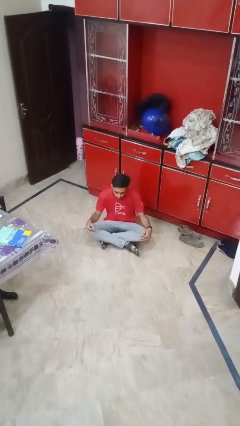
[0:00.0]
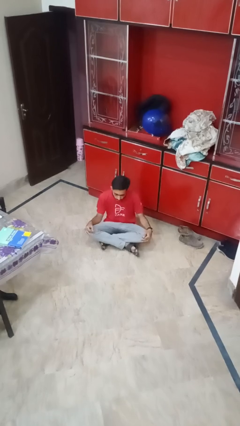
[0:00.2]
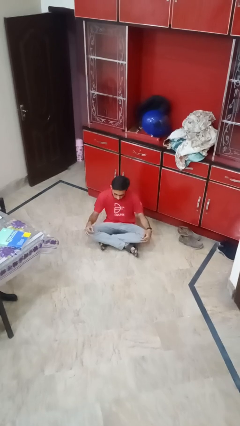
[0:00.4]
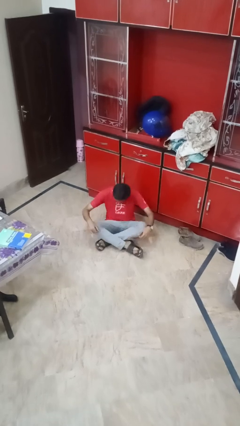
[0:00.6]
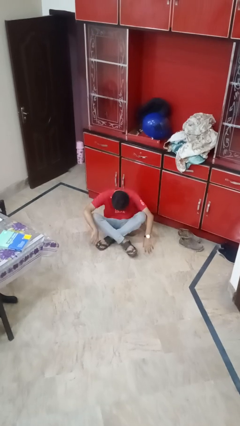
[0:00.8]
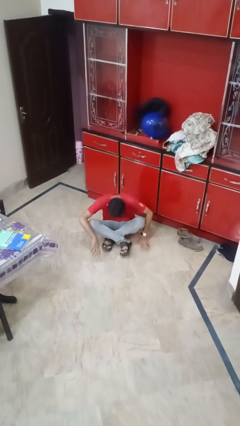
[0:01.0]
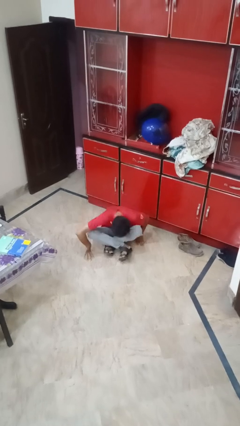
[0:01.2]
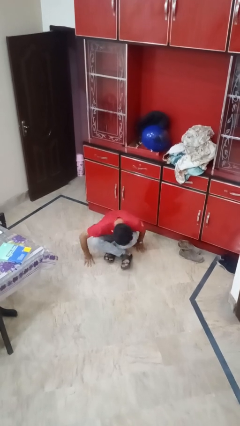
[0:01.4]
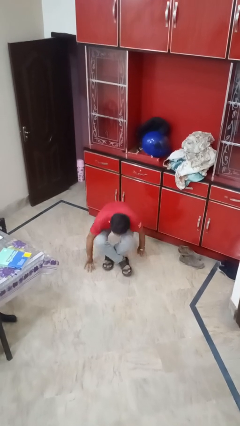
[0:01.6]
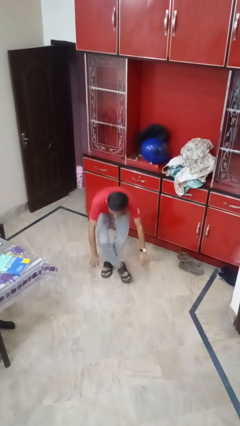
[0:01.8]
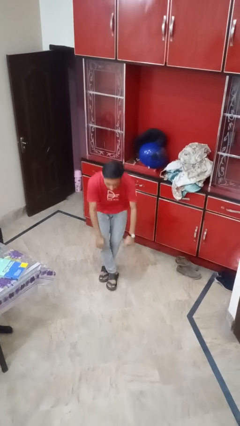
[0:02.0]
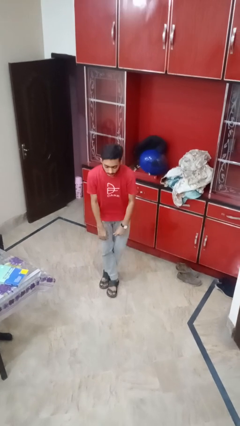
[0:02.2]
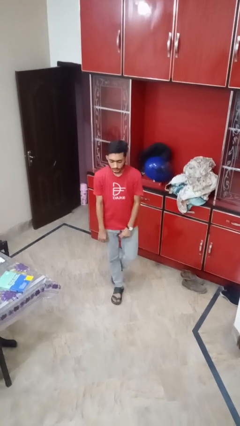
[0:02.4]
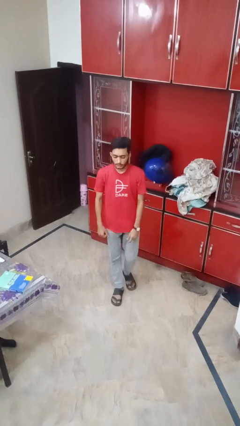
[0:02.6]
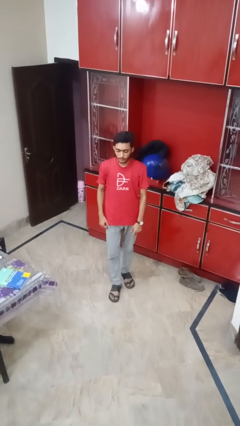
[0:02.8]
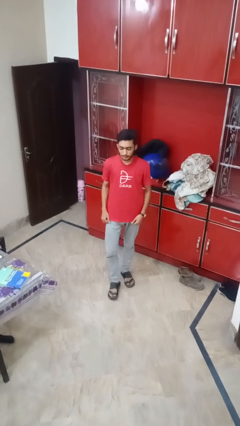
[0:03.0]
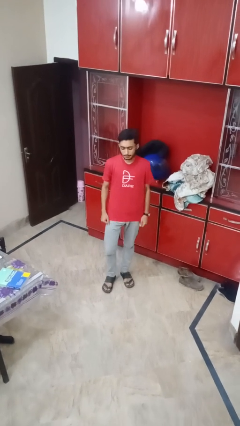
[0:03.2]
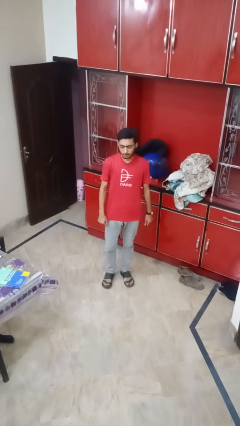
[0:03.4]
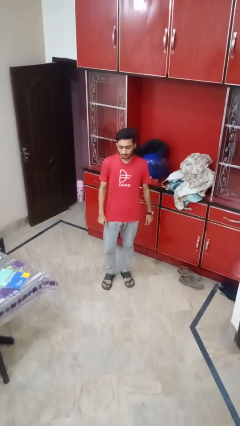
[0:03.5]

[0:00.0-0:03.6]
person stands up from floor

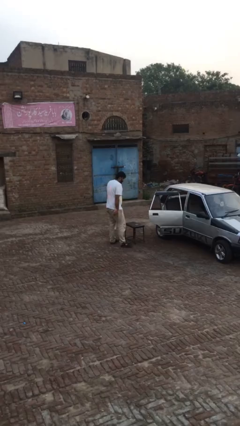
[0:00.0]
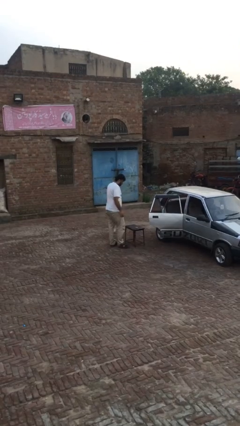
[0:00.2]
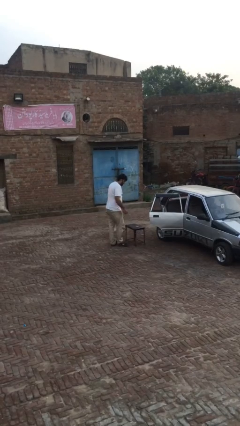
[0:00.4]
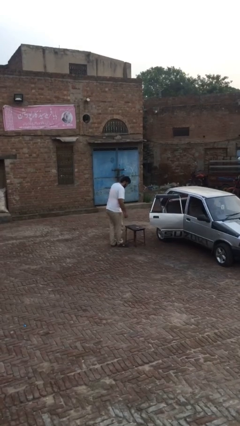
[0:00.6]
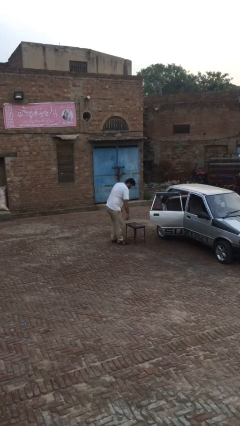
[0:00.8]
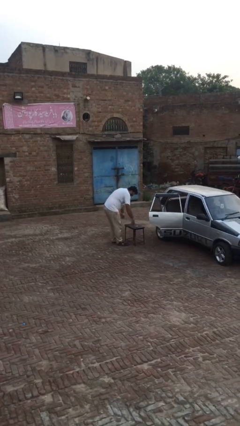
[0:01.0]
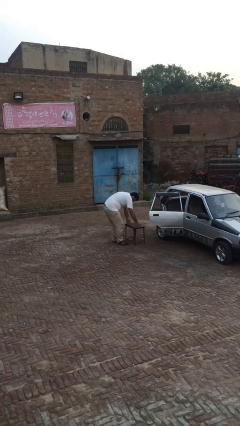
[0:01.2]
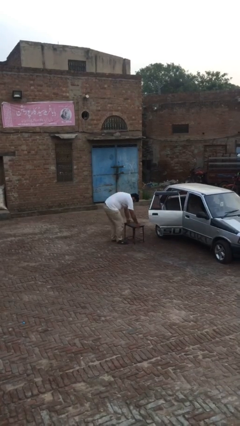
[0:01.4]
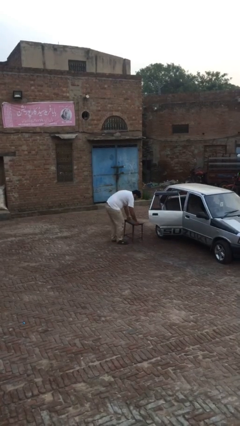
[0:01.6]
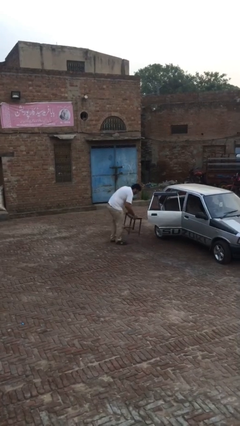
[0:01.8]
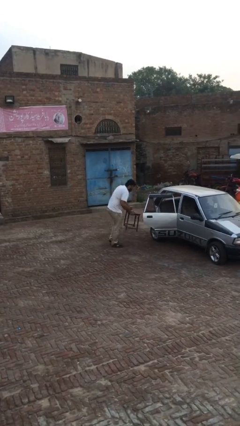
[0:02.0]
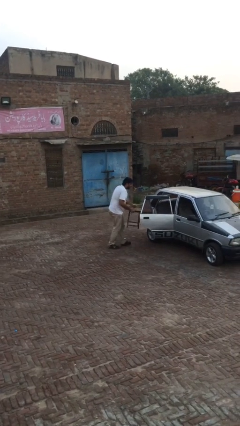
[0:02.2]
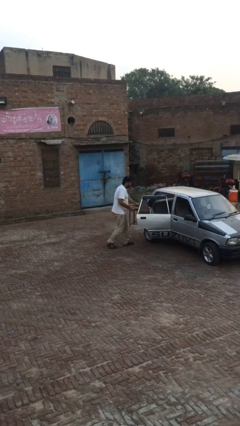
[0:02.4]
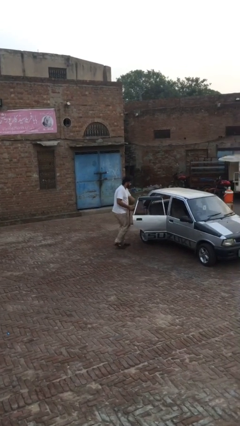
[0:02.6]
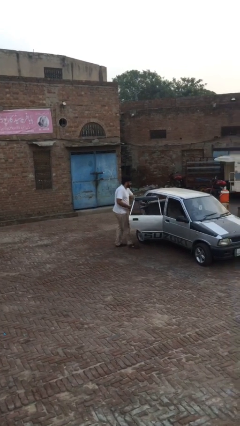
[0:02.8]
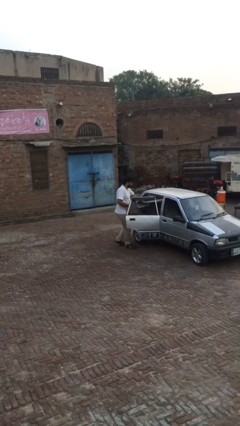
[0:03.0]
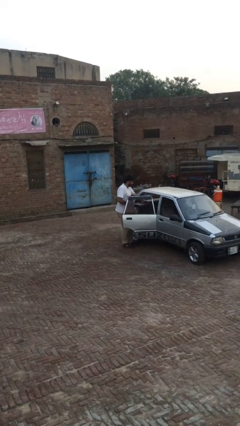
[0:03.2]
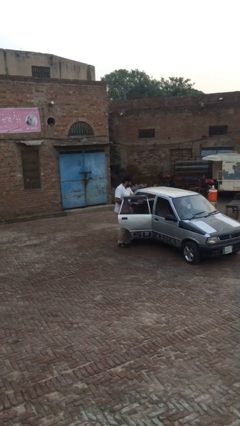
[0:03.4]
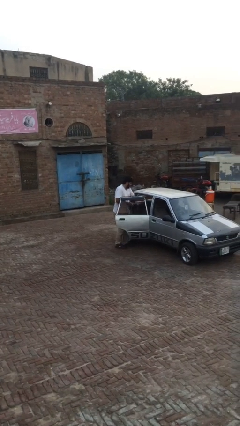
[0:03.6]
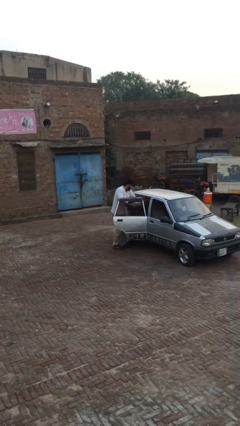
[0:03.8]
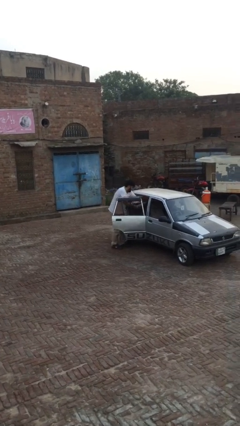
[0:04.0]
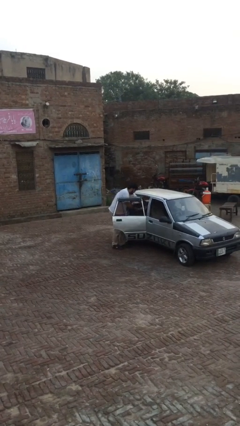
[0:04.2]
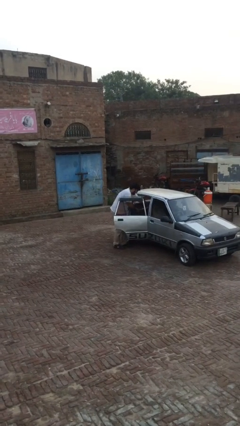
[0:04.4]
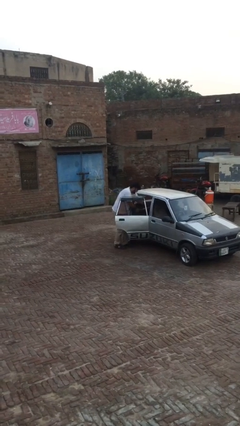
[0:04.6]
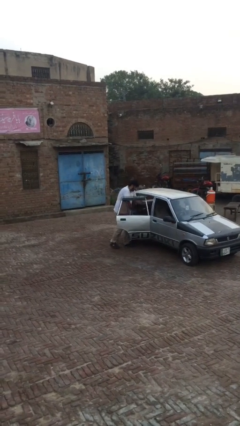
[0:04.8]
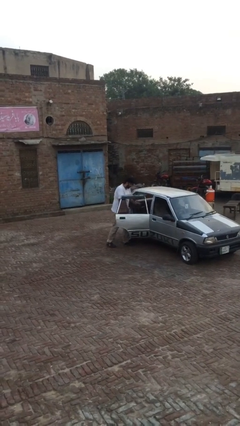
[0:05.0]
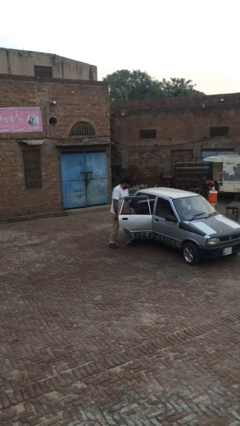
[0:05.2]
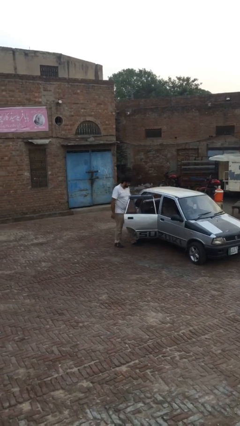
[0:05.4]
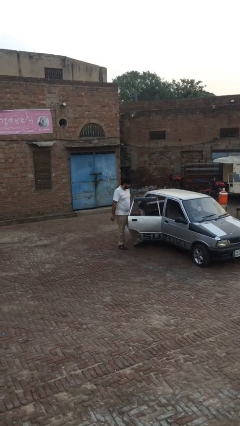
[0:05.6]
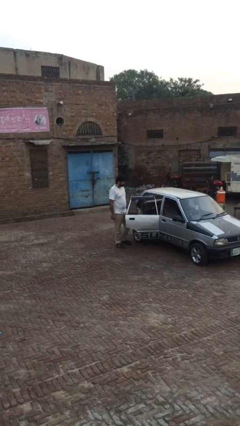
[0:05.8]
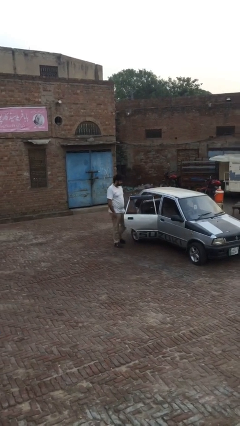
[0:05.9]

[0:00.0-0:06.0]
person loads car

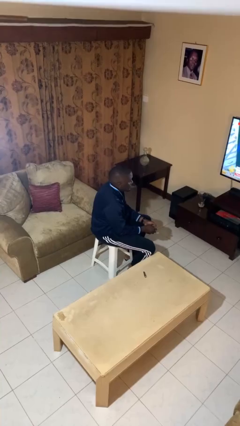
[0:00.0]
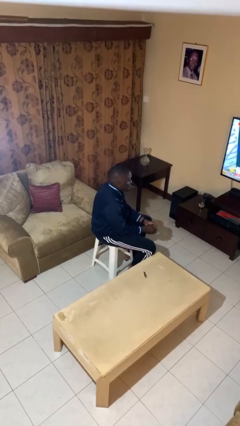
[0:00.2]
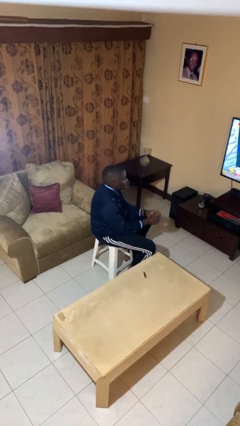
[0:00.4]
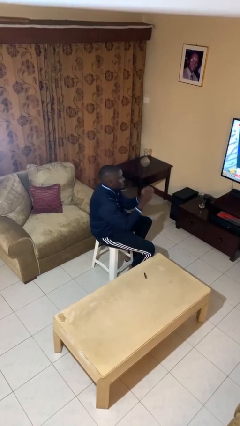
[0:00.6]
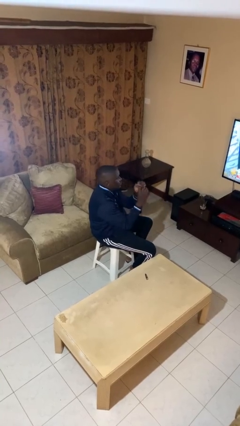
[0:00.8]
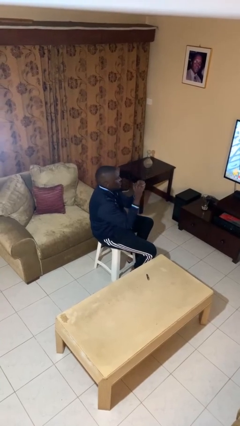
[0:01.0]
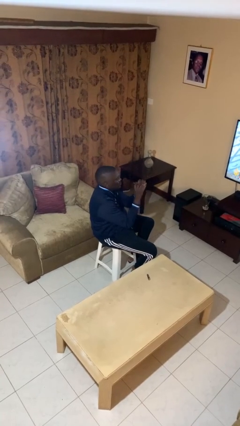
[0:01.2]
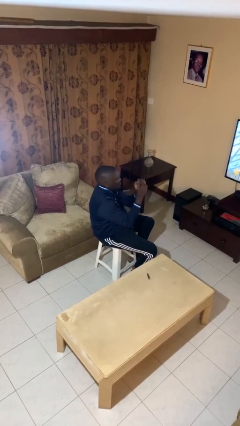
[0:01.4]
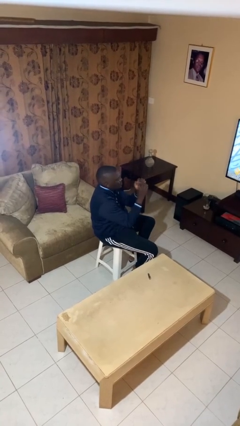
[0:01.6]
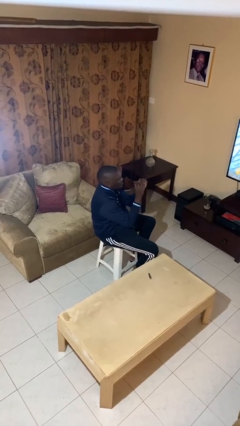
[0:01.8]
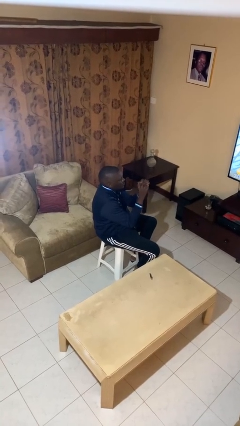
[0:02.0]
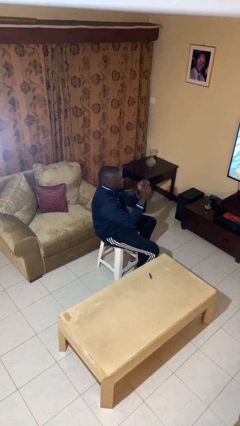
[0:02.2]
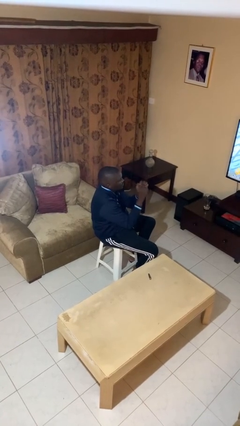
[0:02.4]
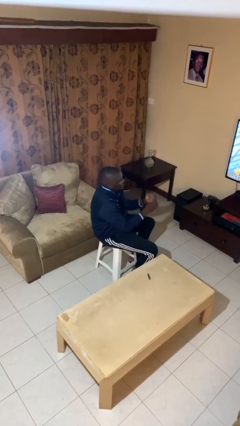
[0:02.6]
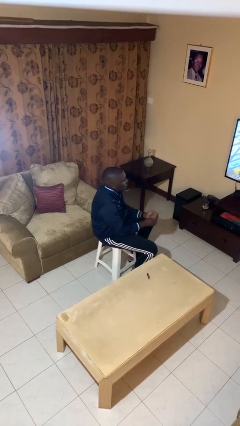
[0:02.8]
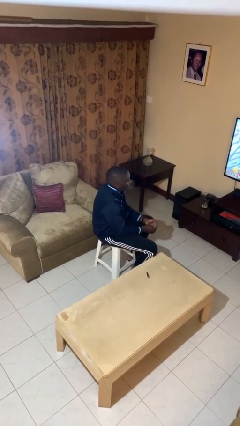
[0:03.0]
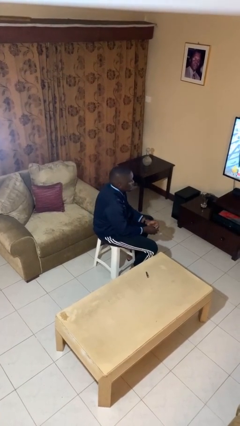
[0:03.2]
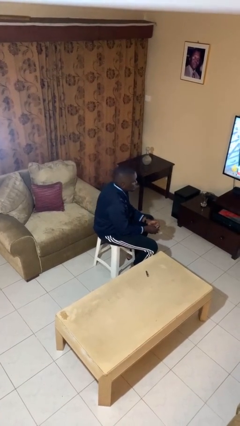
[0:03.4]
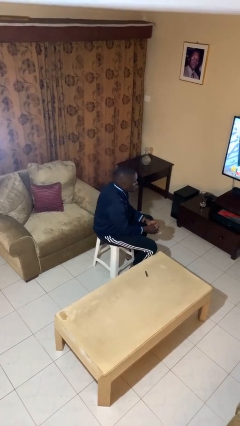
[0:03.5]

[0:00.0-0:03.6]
person files fingernails

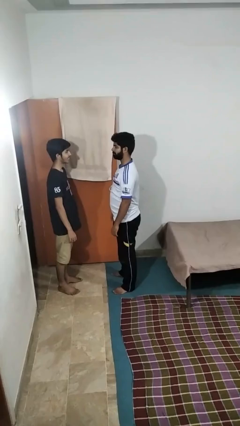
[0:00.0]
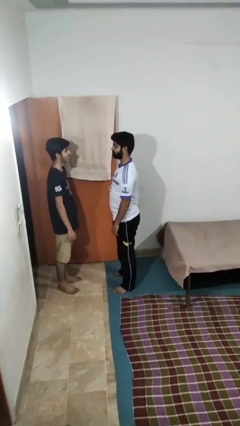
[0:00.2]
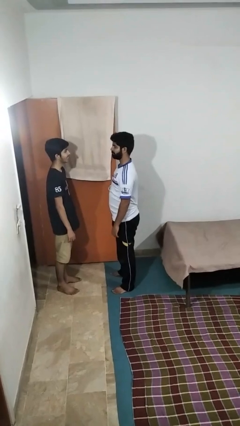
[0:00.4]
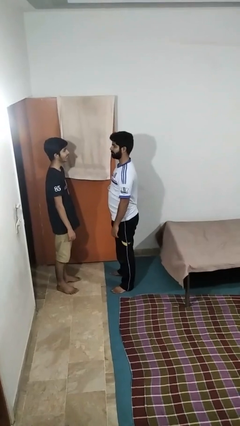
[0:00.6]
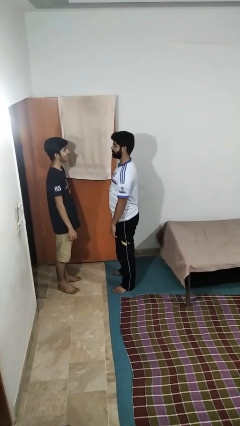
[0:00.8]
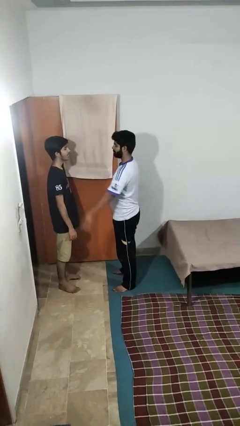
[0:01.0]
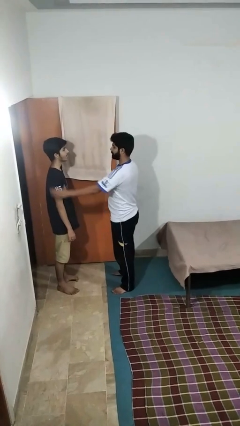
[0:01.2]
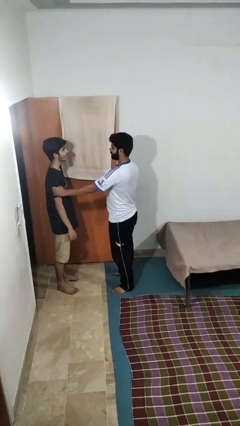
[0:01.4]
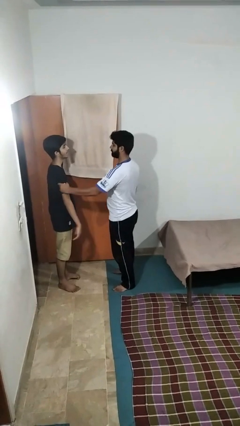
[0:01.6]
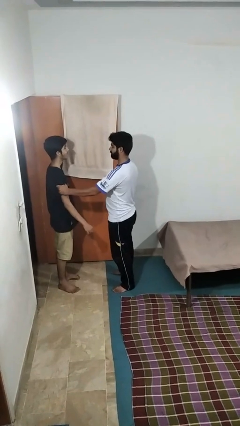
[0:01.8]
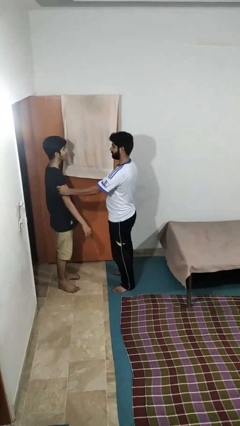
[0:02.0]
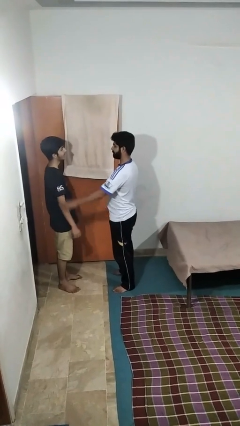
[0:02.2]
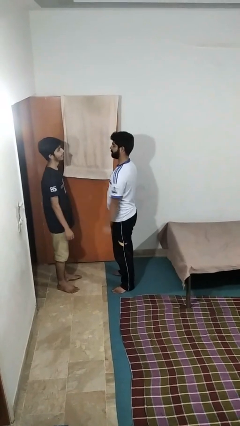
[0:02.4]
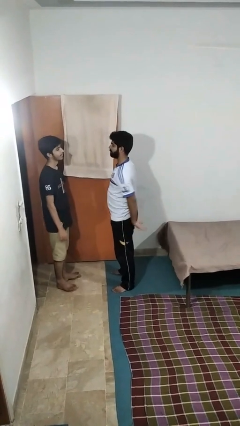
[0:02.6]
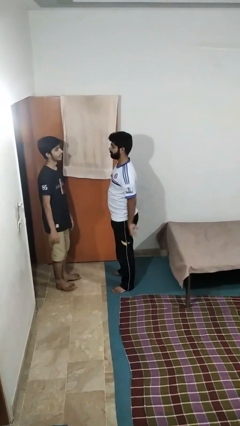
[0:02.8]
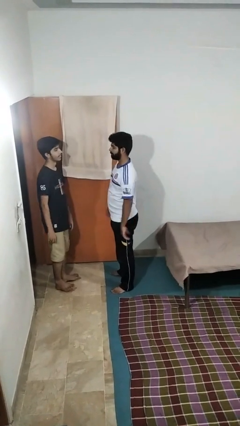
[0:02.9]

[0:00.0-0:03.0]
person grabs person by bicep

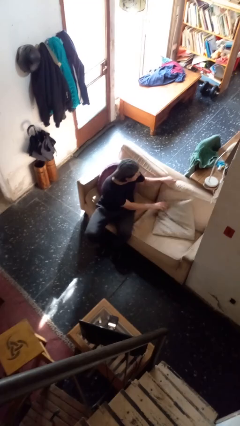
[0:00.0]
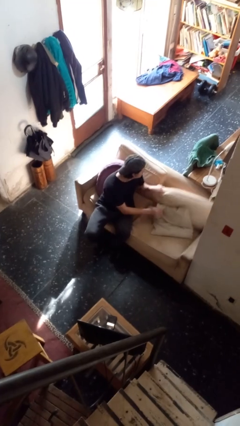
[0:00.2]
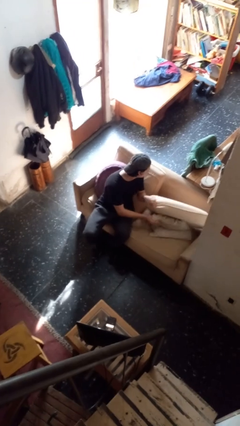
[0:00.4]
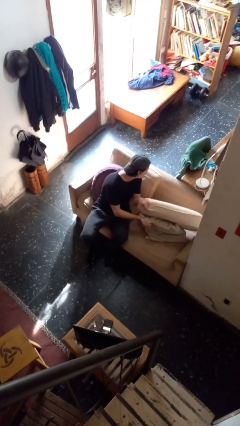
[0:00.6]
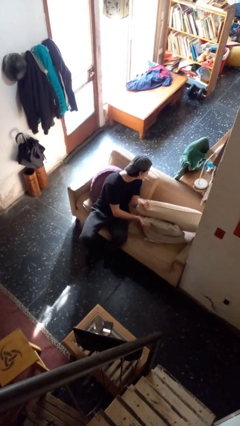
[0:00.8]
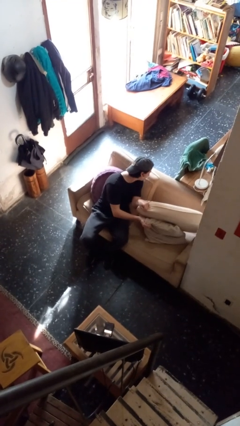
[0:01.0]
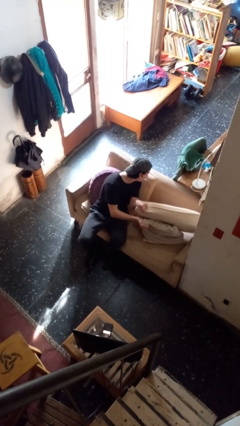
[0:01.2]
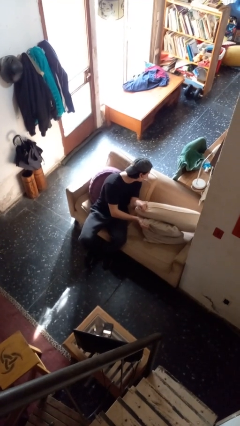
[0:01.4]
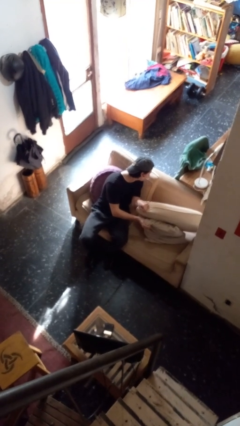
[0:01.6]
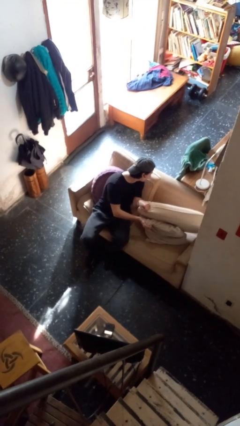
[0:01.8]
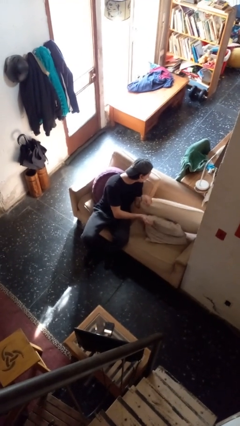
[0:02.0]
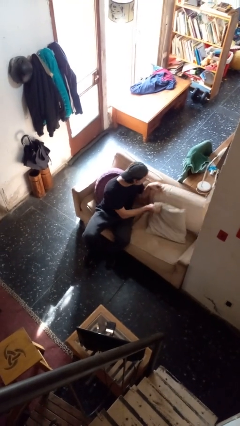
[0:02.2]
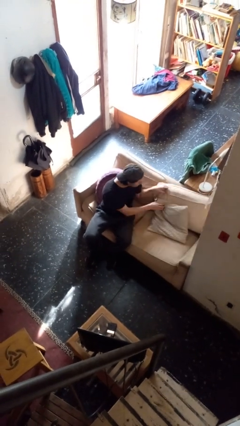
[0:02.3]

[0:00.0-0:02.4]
person searches in couch
